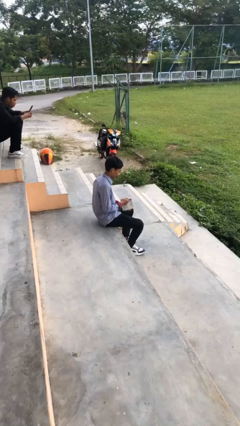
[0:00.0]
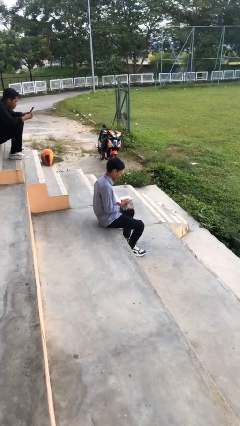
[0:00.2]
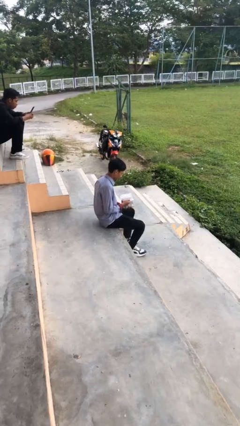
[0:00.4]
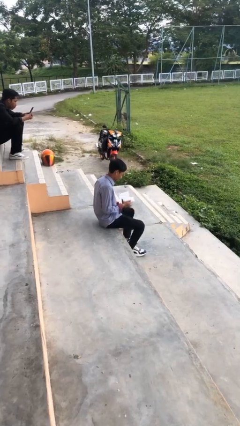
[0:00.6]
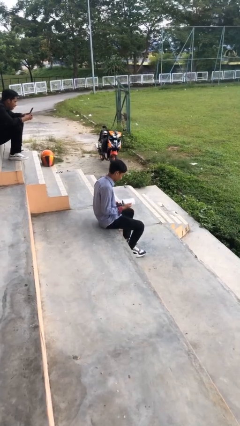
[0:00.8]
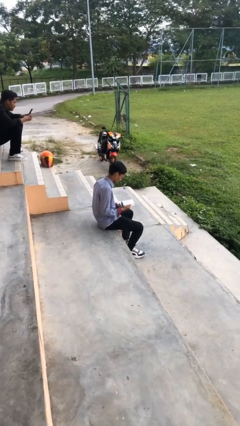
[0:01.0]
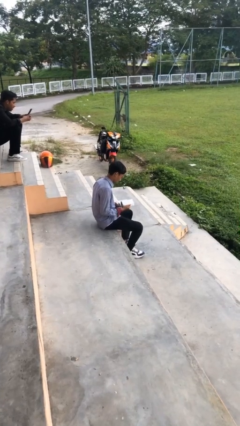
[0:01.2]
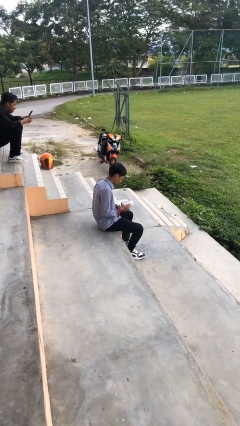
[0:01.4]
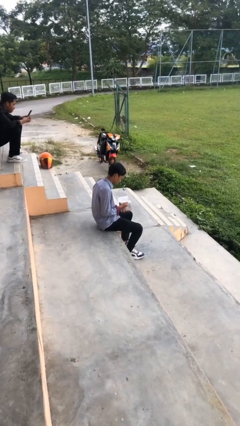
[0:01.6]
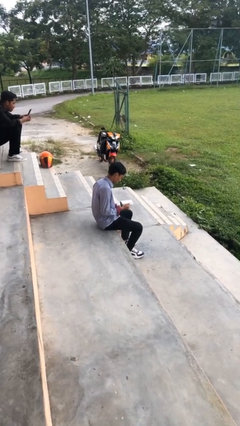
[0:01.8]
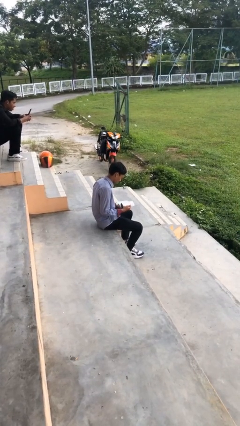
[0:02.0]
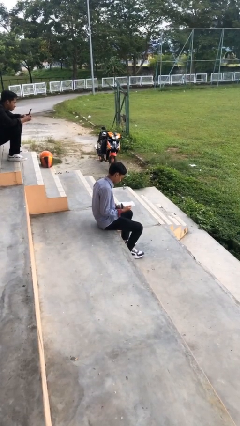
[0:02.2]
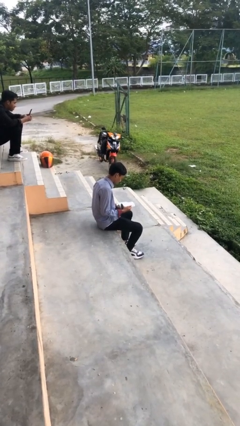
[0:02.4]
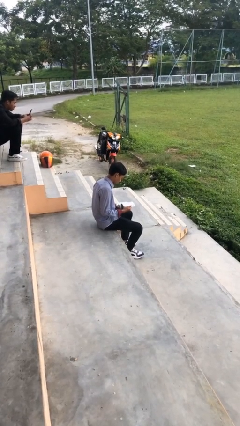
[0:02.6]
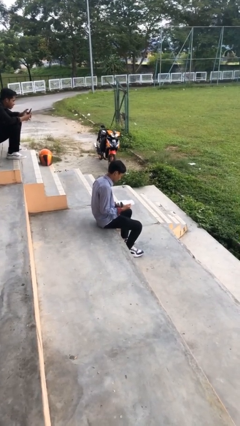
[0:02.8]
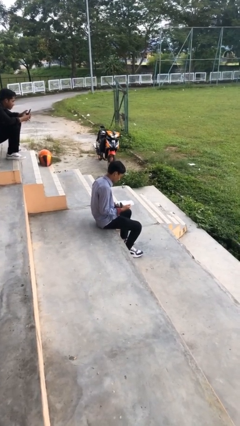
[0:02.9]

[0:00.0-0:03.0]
person reads document

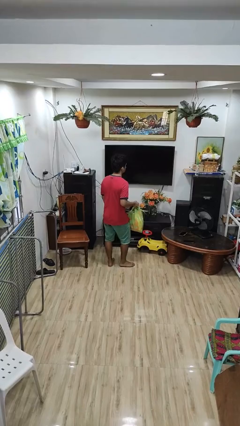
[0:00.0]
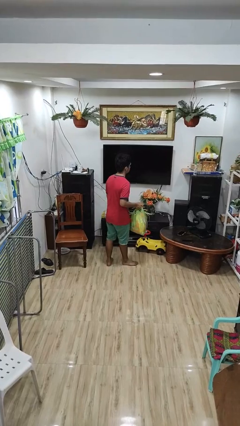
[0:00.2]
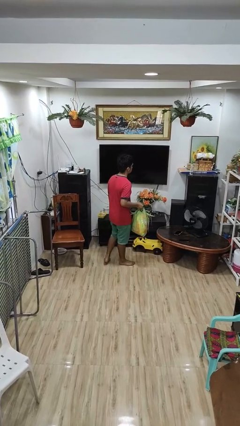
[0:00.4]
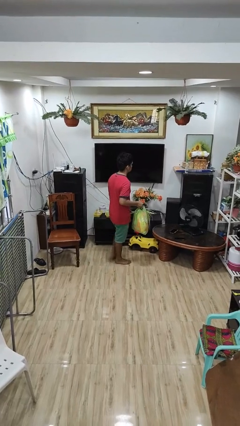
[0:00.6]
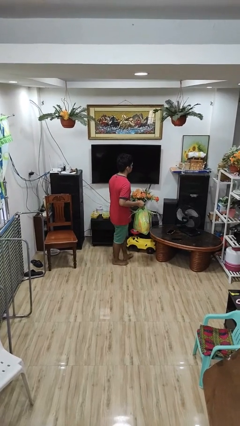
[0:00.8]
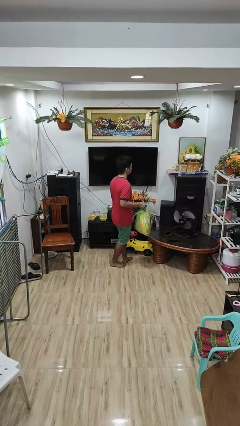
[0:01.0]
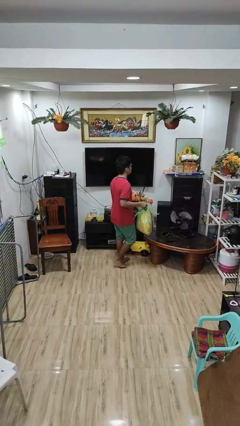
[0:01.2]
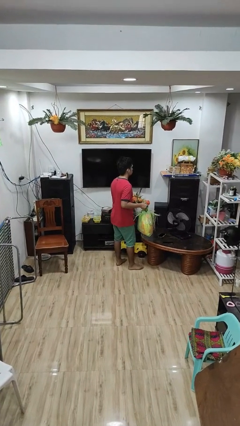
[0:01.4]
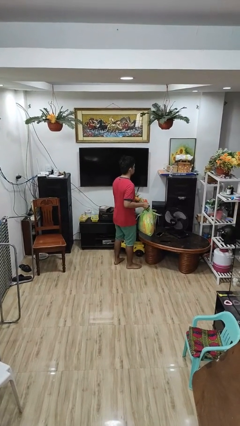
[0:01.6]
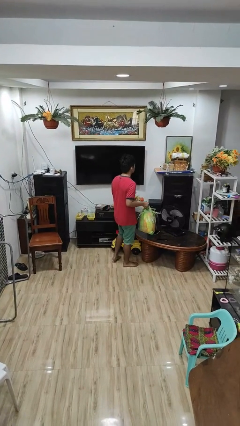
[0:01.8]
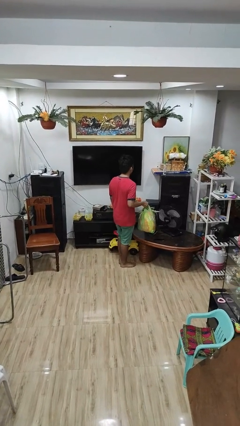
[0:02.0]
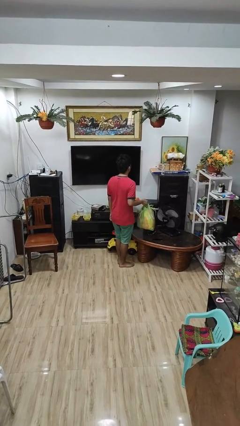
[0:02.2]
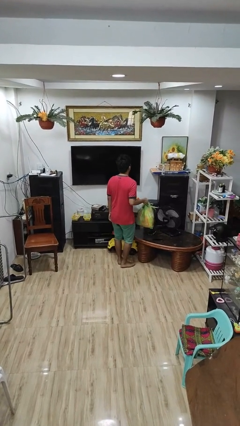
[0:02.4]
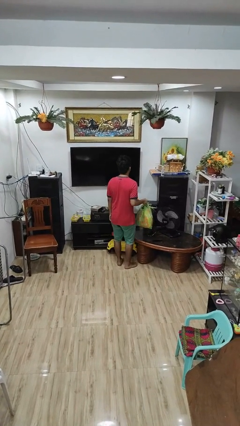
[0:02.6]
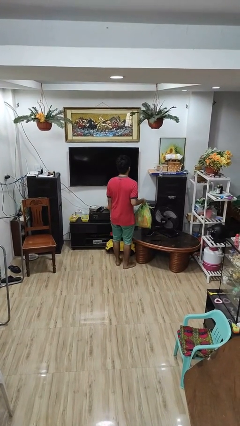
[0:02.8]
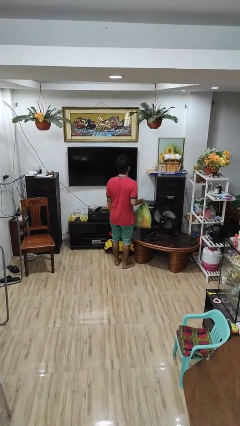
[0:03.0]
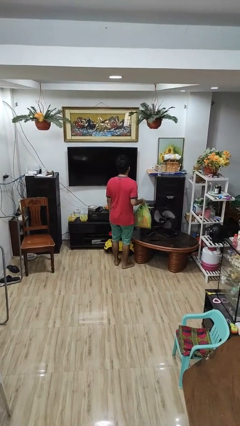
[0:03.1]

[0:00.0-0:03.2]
person carries groceries

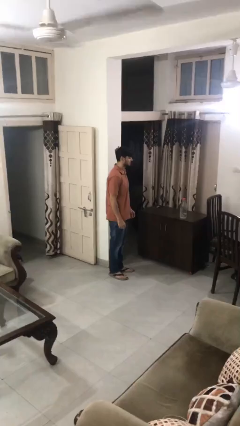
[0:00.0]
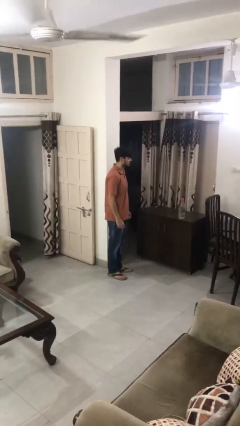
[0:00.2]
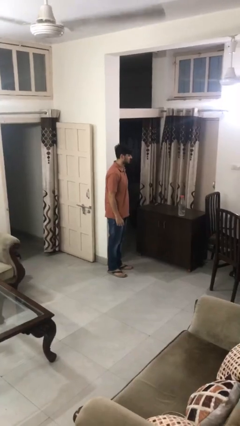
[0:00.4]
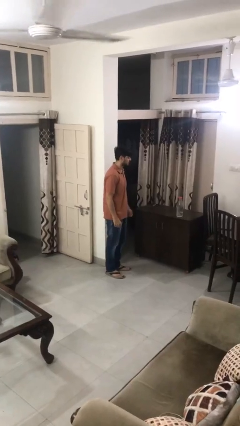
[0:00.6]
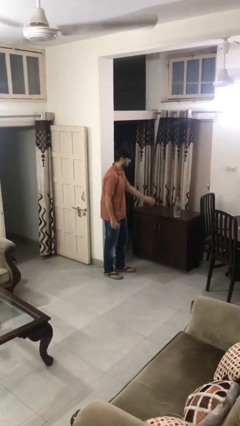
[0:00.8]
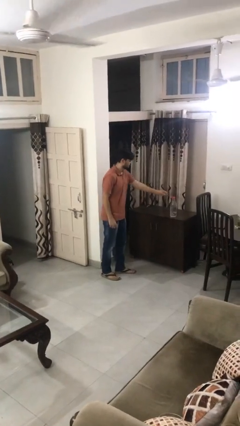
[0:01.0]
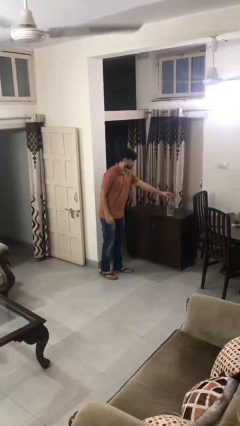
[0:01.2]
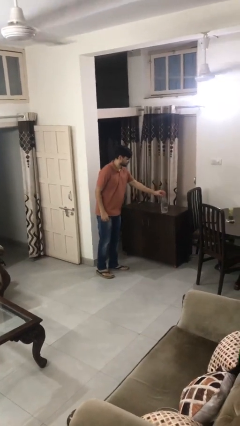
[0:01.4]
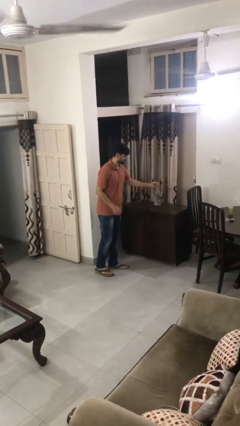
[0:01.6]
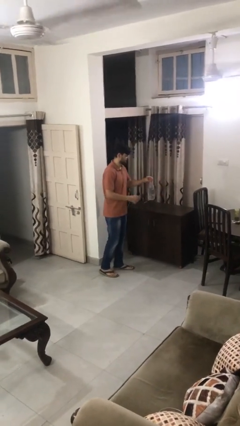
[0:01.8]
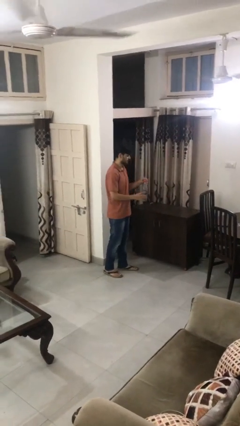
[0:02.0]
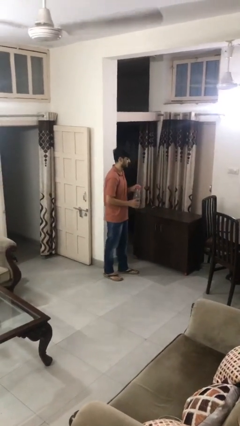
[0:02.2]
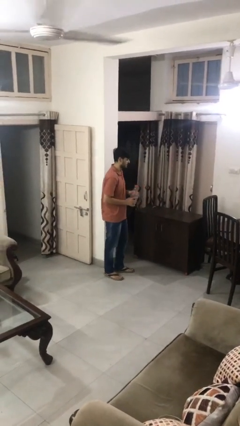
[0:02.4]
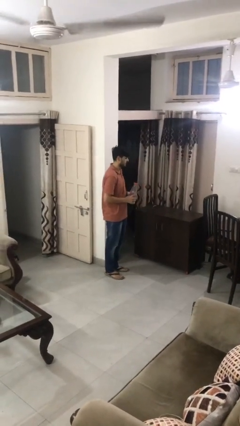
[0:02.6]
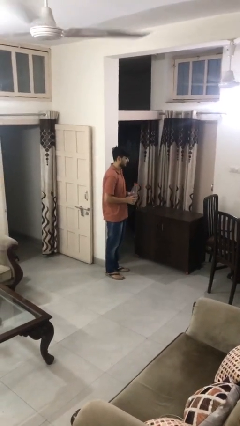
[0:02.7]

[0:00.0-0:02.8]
person picks up object from countertop

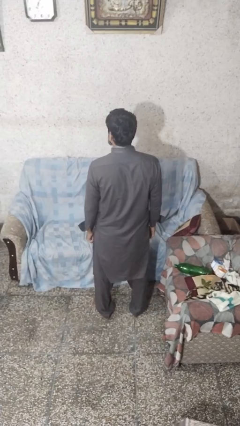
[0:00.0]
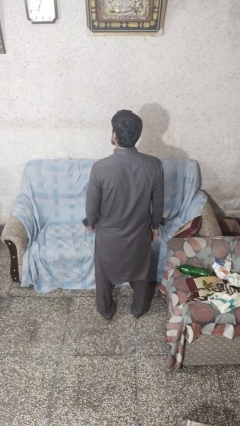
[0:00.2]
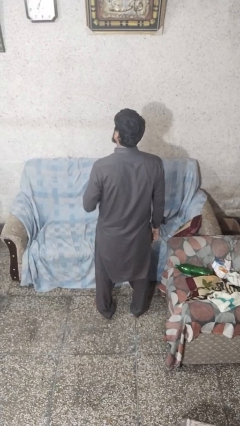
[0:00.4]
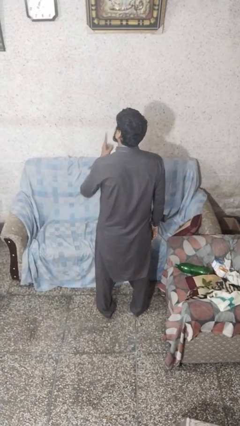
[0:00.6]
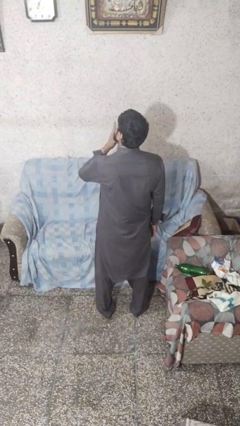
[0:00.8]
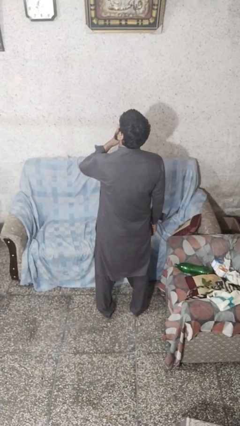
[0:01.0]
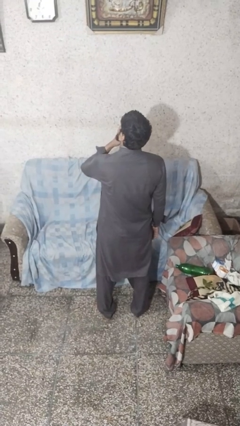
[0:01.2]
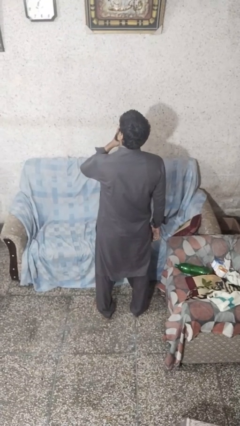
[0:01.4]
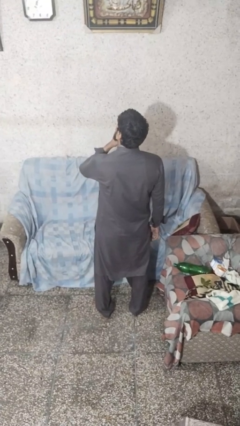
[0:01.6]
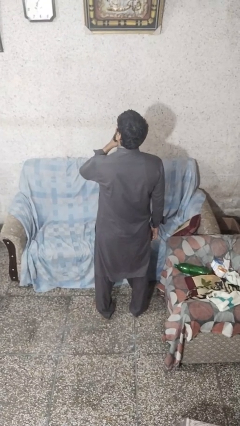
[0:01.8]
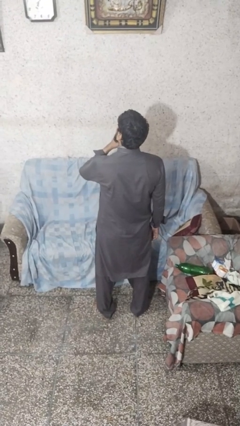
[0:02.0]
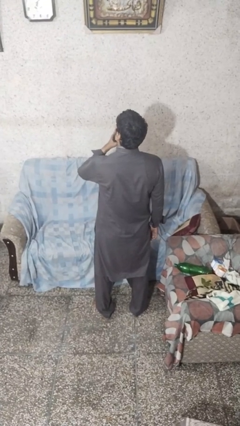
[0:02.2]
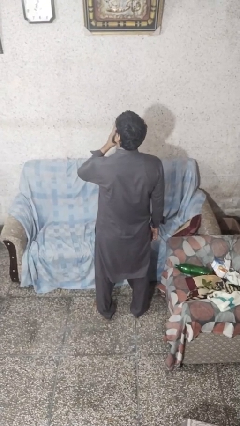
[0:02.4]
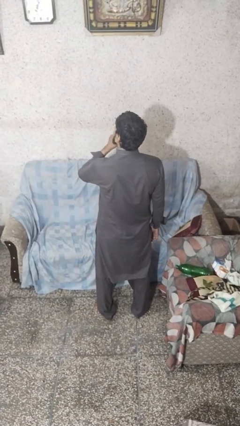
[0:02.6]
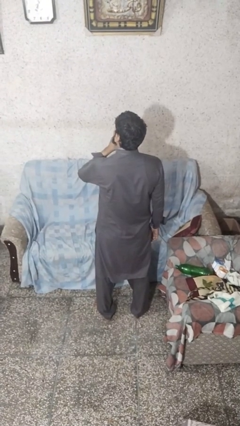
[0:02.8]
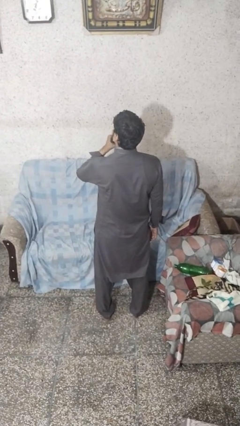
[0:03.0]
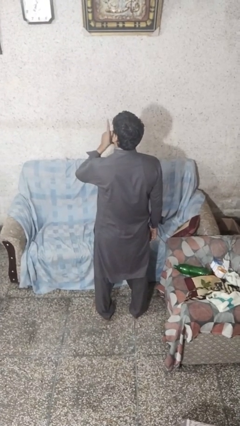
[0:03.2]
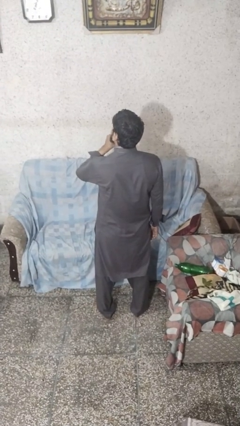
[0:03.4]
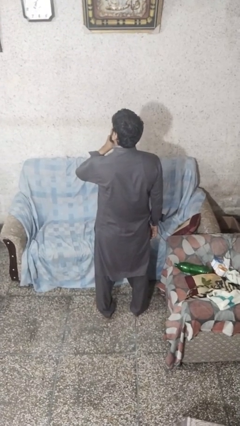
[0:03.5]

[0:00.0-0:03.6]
person gestures be quiet

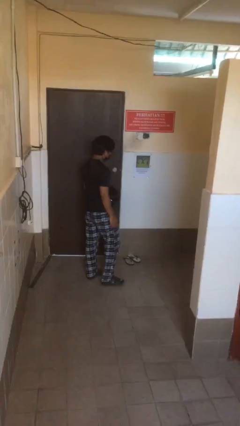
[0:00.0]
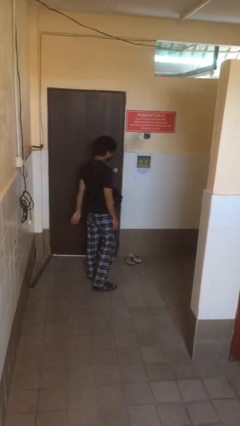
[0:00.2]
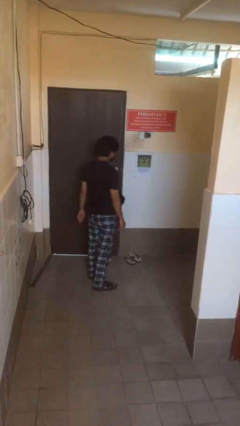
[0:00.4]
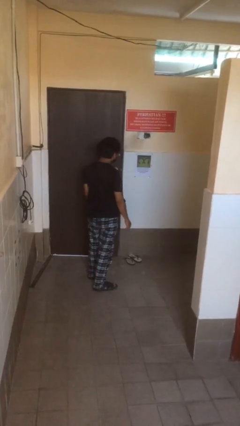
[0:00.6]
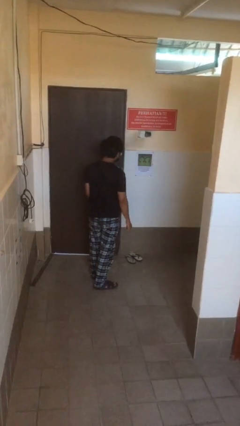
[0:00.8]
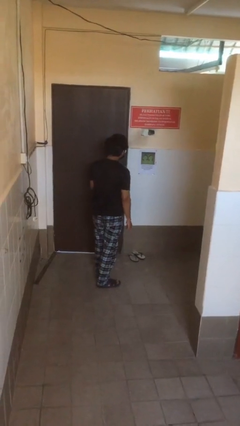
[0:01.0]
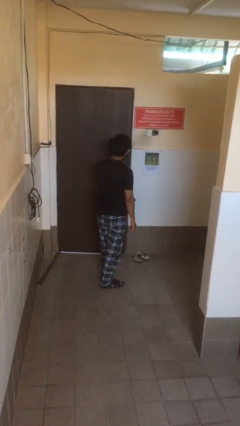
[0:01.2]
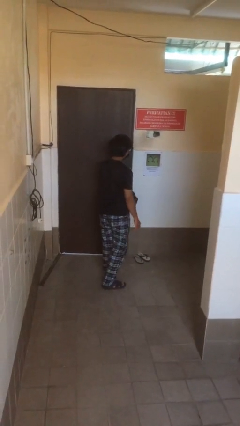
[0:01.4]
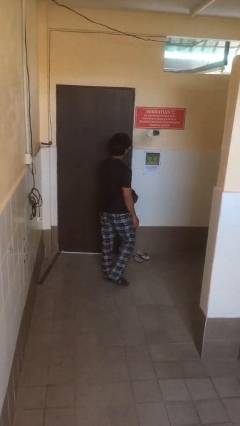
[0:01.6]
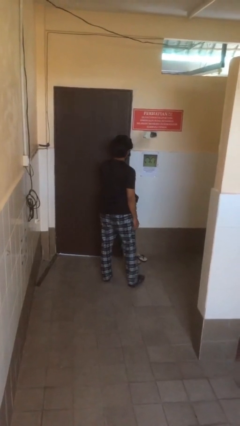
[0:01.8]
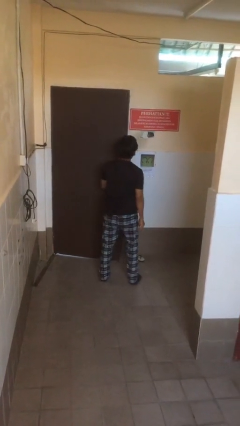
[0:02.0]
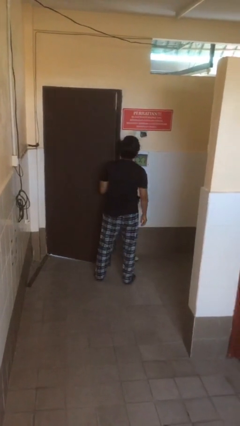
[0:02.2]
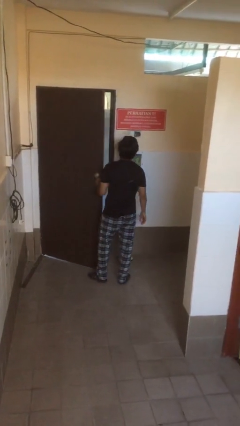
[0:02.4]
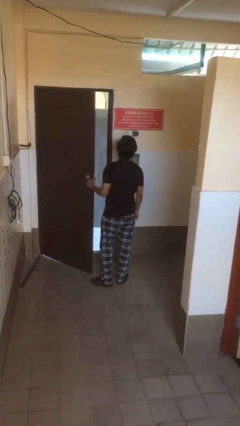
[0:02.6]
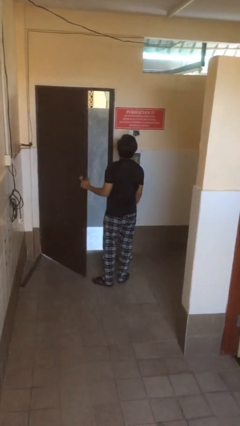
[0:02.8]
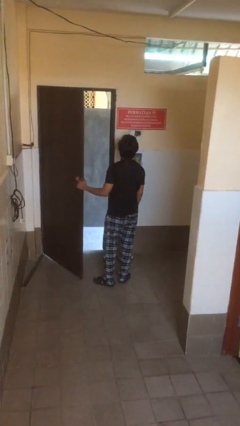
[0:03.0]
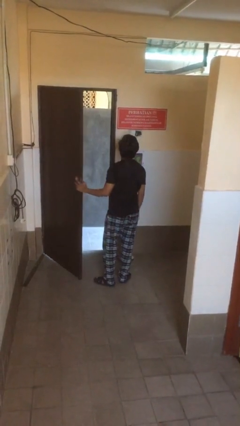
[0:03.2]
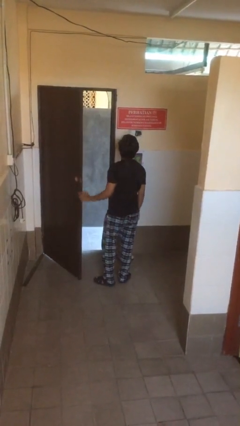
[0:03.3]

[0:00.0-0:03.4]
person opens facility door

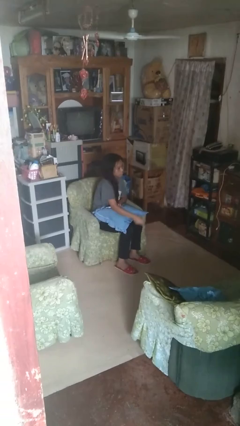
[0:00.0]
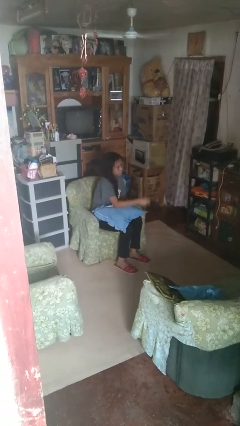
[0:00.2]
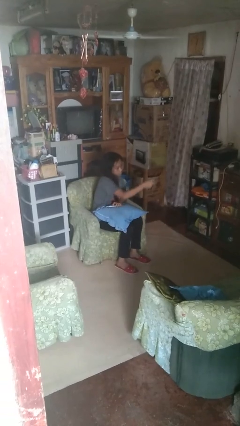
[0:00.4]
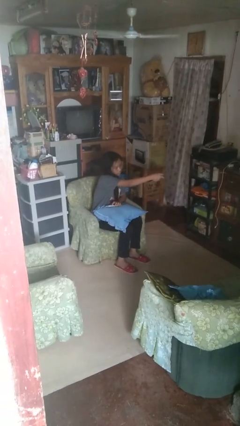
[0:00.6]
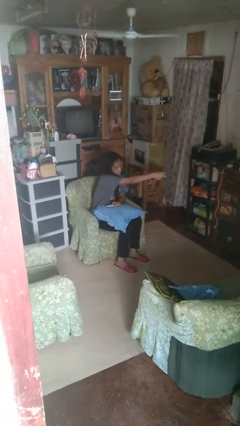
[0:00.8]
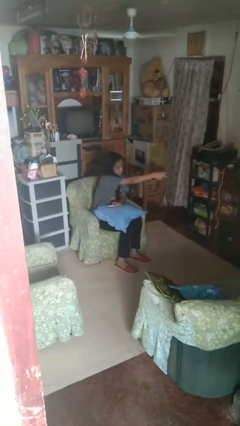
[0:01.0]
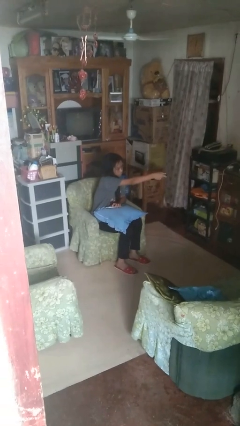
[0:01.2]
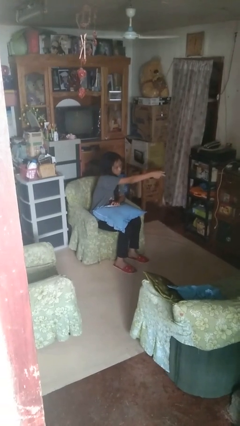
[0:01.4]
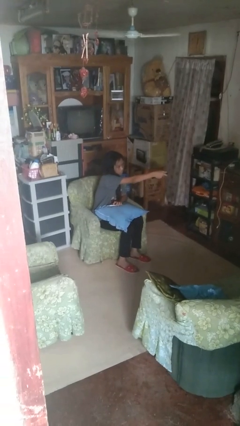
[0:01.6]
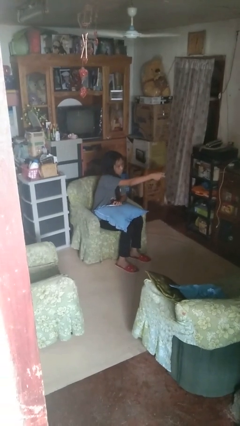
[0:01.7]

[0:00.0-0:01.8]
person uses television remote
